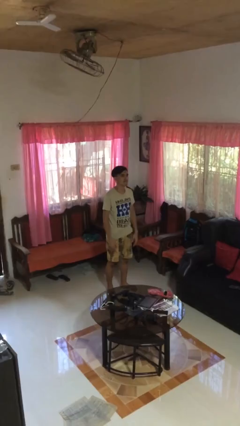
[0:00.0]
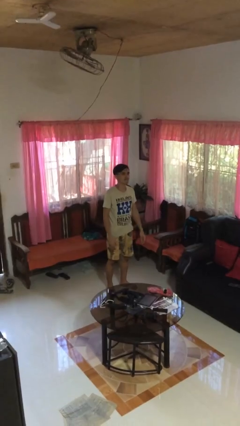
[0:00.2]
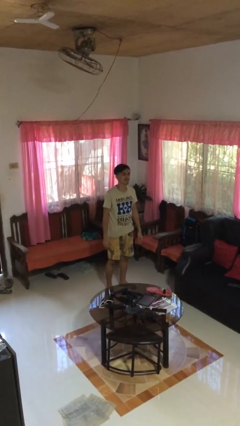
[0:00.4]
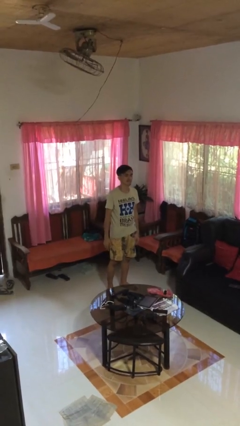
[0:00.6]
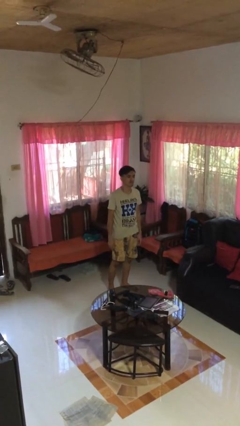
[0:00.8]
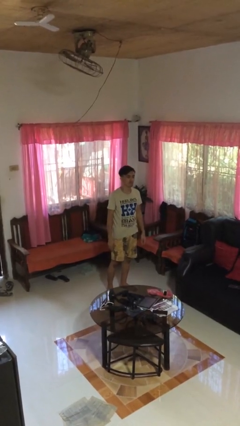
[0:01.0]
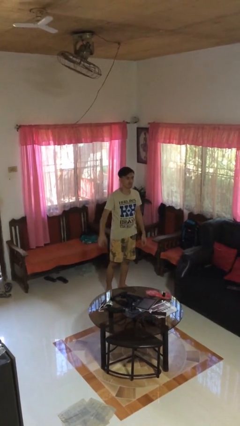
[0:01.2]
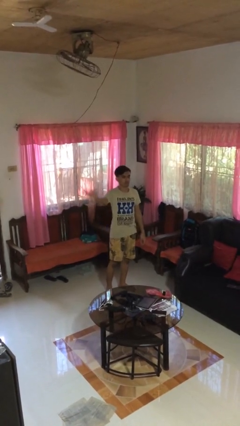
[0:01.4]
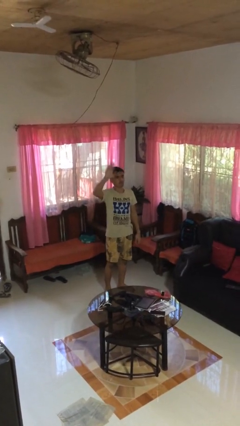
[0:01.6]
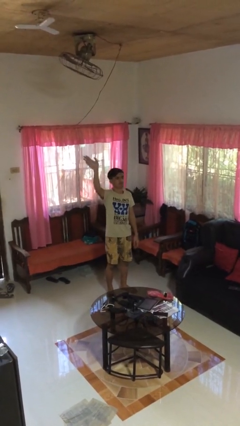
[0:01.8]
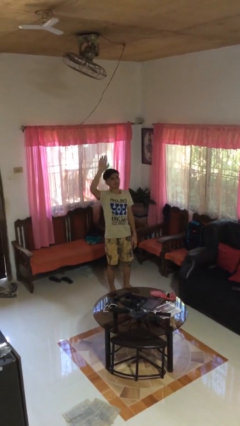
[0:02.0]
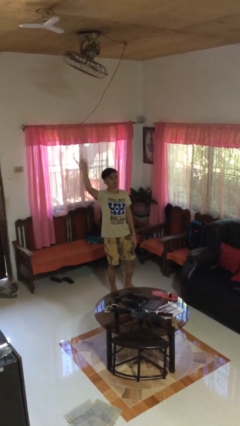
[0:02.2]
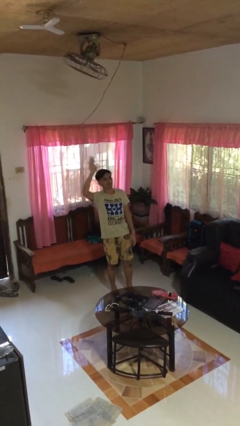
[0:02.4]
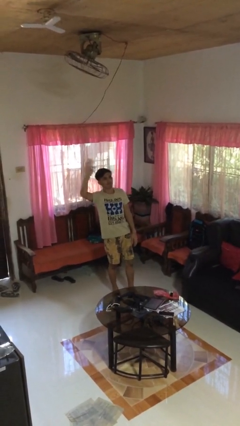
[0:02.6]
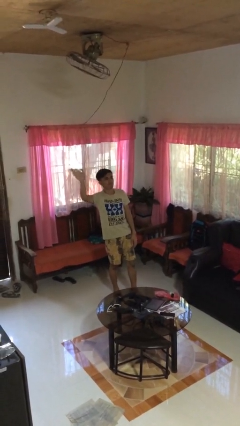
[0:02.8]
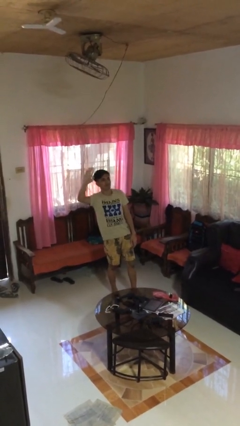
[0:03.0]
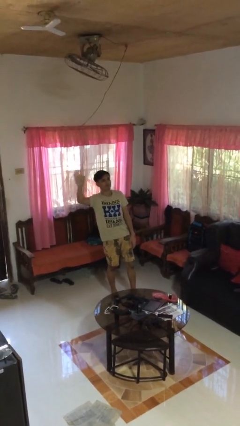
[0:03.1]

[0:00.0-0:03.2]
person waves at person

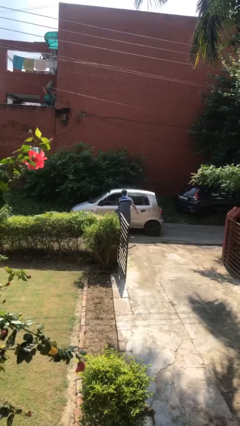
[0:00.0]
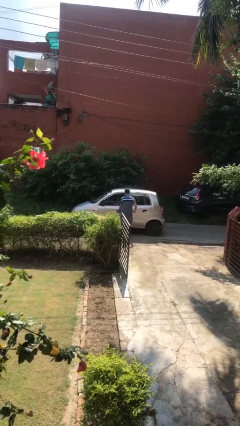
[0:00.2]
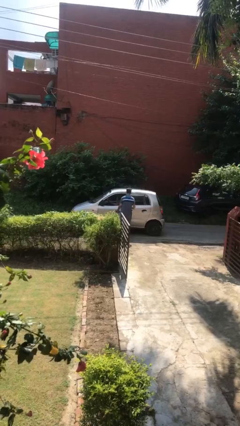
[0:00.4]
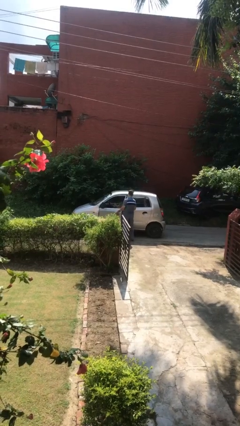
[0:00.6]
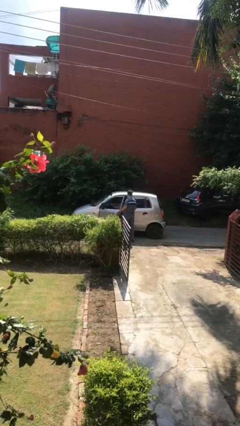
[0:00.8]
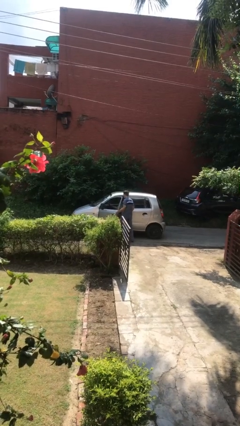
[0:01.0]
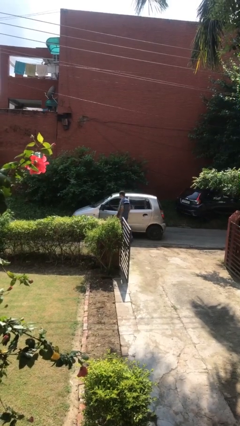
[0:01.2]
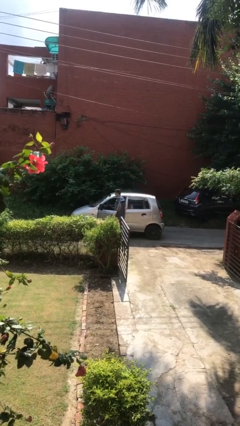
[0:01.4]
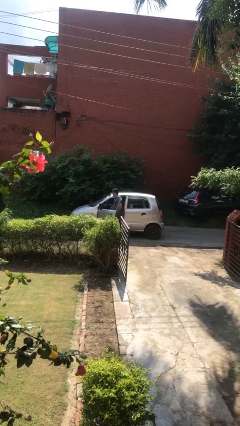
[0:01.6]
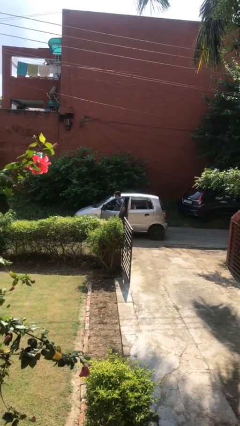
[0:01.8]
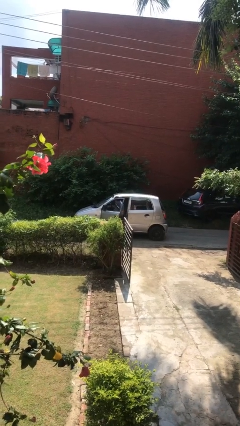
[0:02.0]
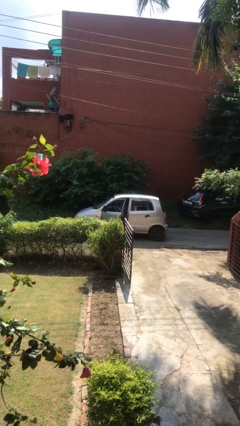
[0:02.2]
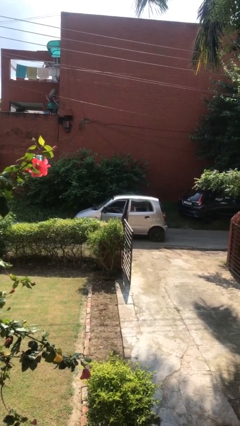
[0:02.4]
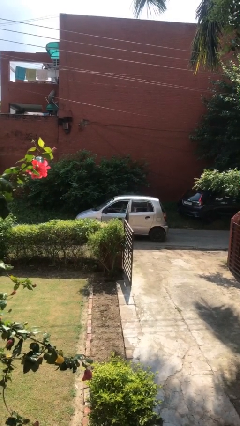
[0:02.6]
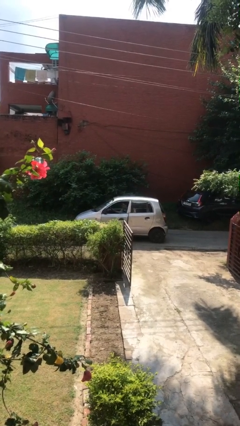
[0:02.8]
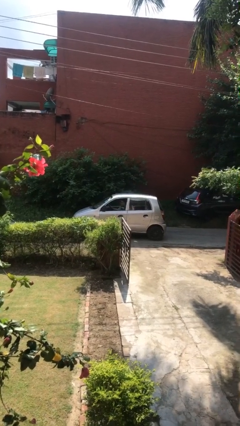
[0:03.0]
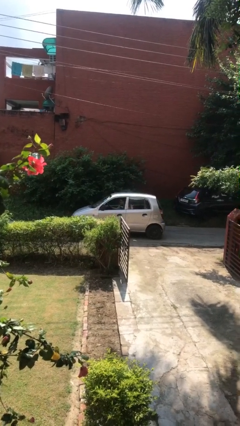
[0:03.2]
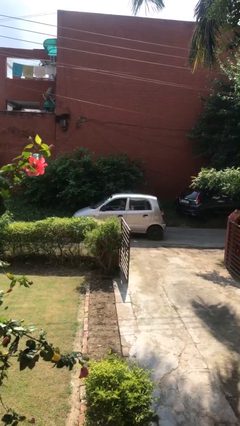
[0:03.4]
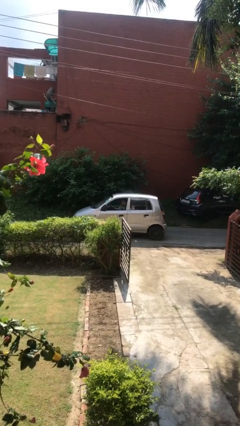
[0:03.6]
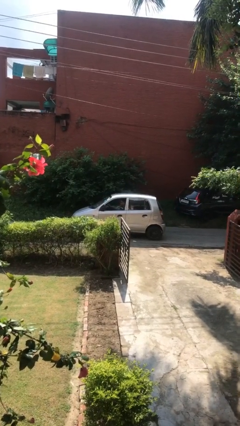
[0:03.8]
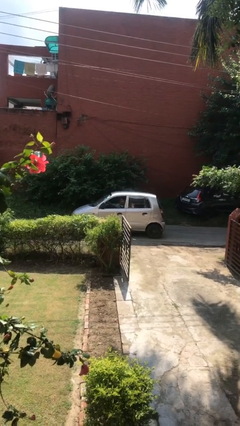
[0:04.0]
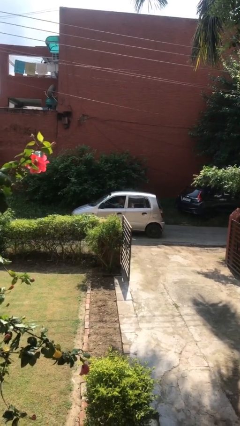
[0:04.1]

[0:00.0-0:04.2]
car picks up person

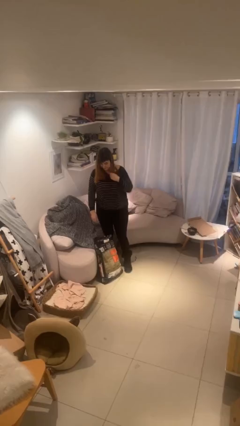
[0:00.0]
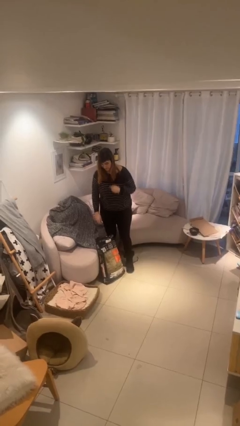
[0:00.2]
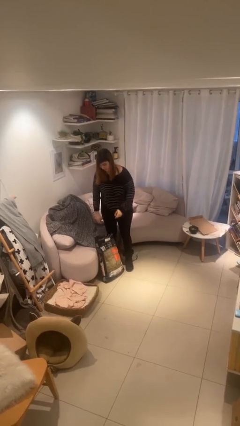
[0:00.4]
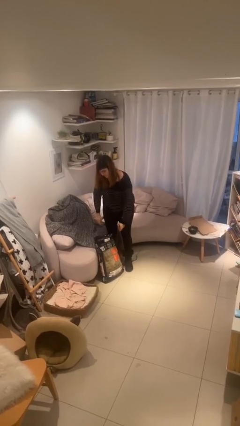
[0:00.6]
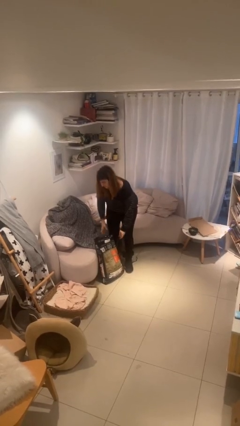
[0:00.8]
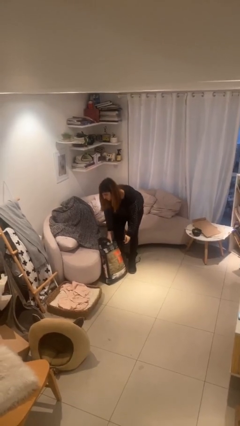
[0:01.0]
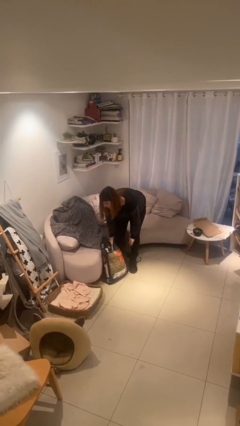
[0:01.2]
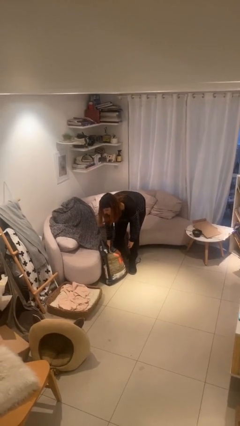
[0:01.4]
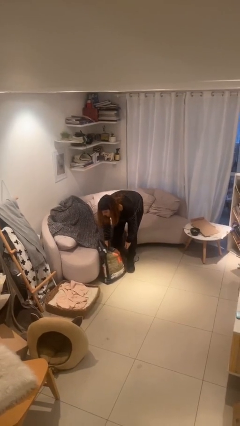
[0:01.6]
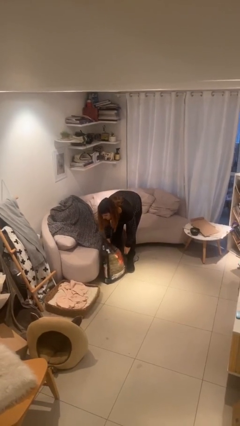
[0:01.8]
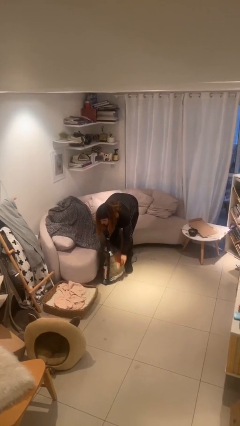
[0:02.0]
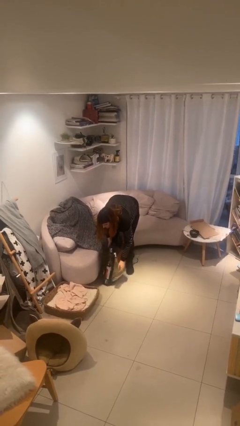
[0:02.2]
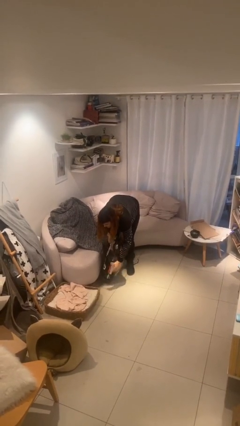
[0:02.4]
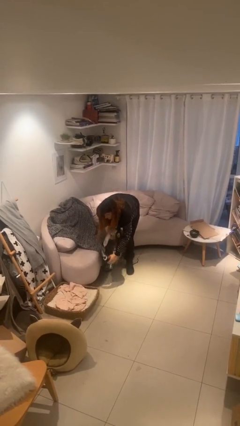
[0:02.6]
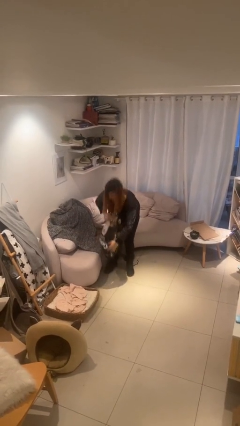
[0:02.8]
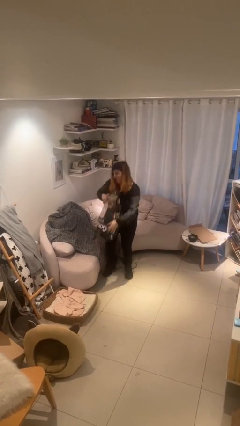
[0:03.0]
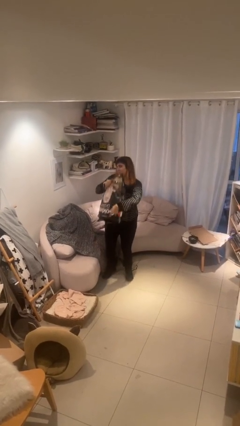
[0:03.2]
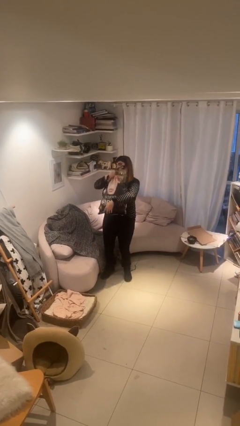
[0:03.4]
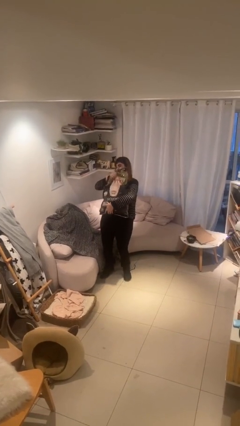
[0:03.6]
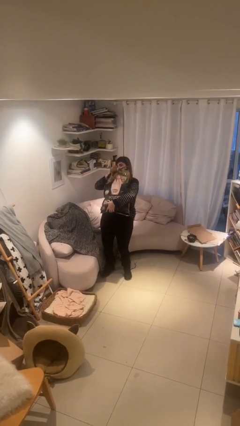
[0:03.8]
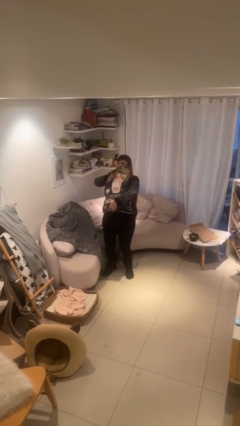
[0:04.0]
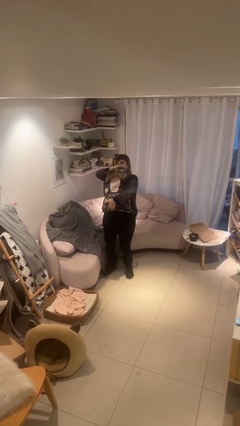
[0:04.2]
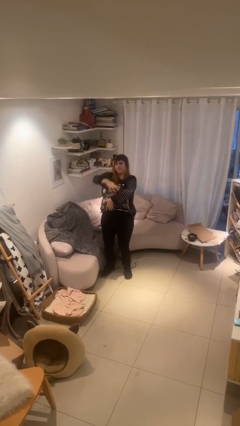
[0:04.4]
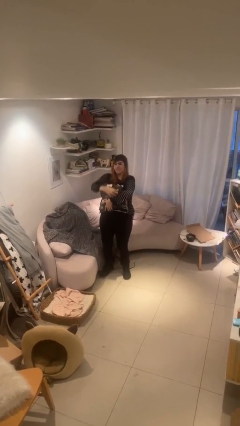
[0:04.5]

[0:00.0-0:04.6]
person picks up object from floor

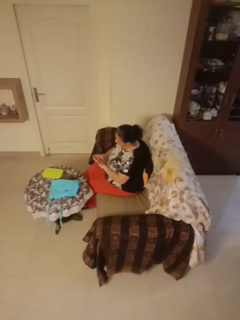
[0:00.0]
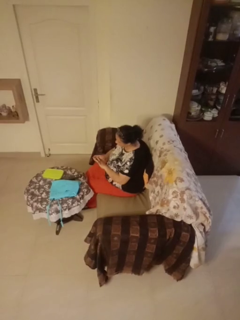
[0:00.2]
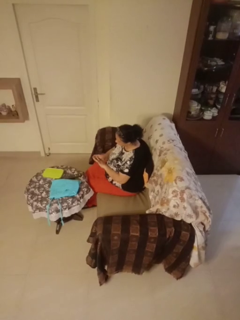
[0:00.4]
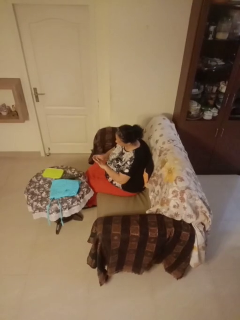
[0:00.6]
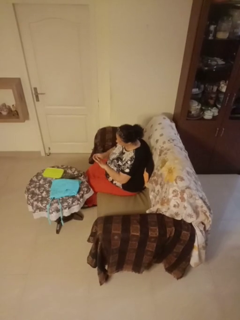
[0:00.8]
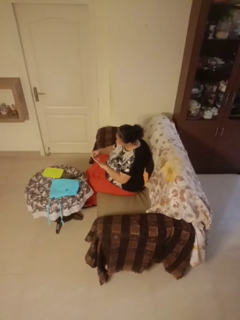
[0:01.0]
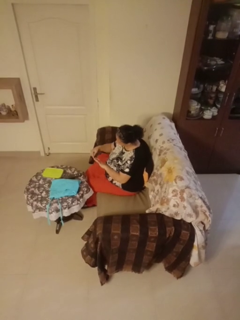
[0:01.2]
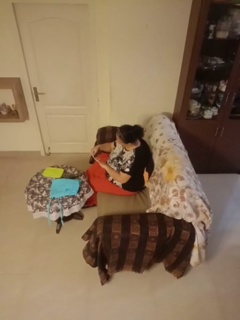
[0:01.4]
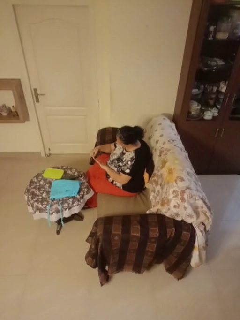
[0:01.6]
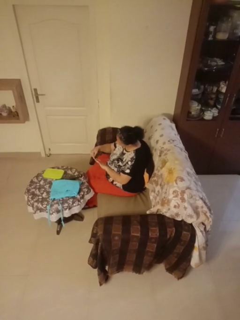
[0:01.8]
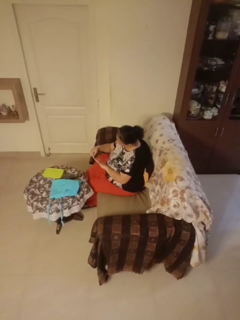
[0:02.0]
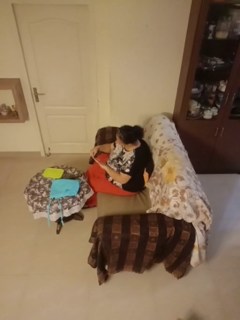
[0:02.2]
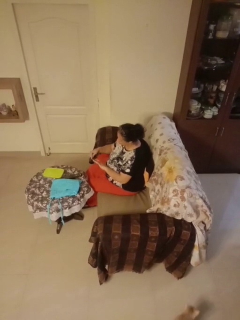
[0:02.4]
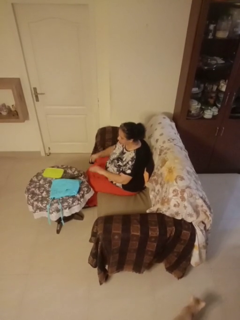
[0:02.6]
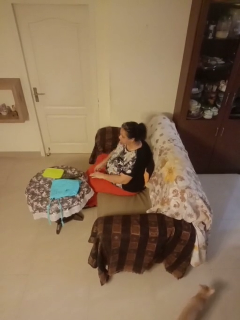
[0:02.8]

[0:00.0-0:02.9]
person files fingernails

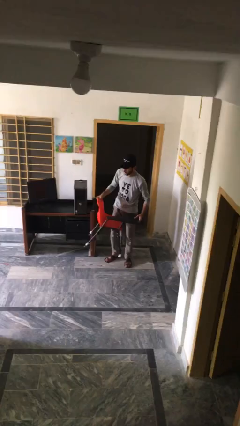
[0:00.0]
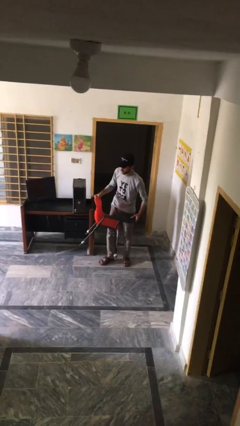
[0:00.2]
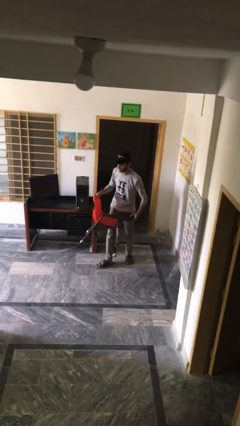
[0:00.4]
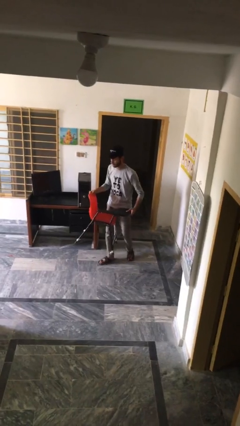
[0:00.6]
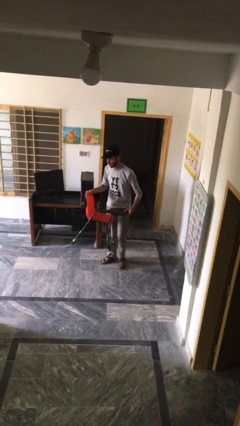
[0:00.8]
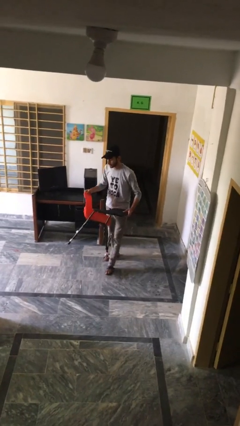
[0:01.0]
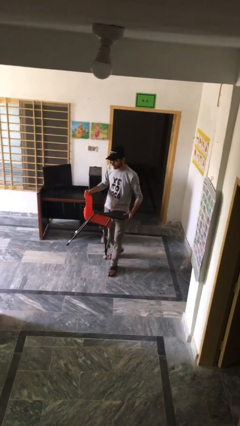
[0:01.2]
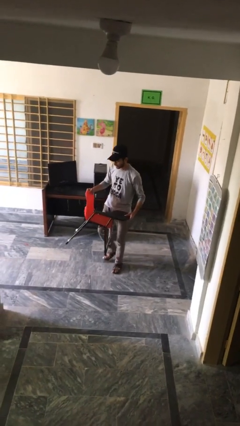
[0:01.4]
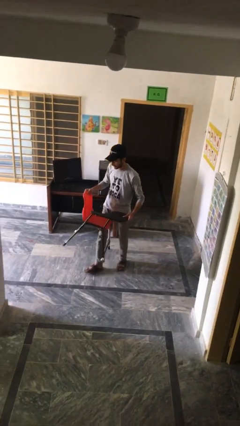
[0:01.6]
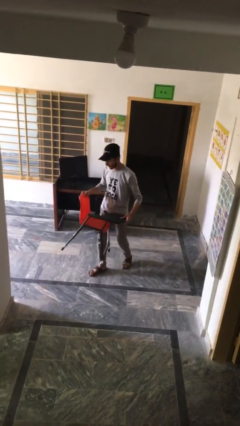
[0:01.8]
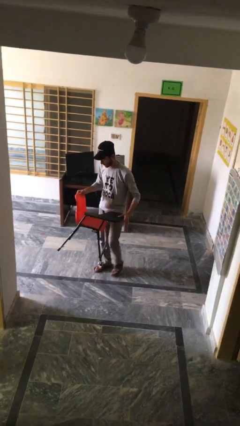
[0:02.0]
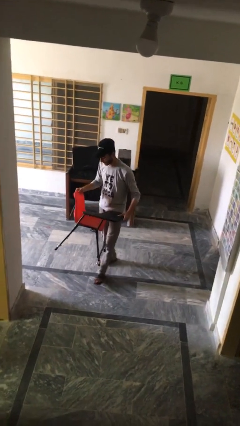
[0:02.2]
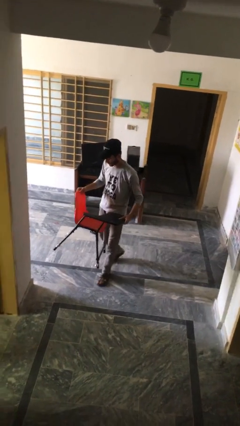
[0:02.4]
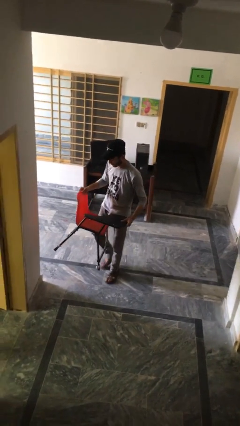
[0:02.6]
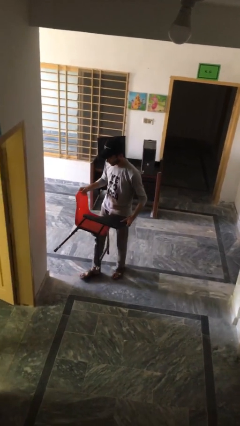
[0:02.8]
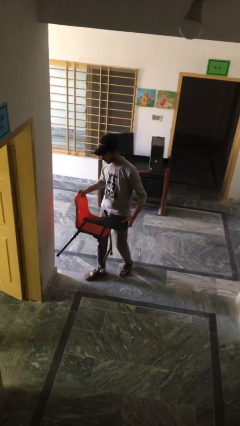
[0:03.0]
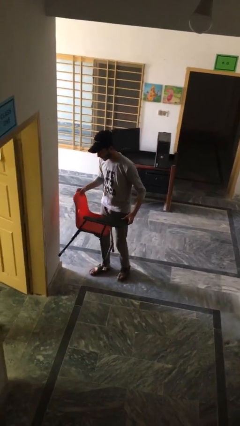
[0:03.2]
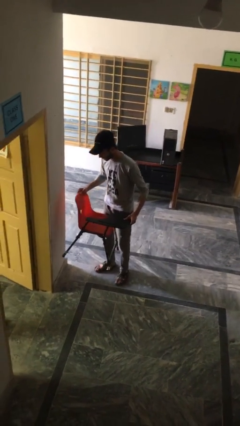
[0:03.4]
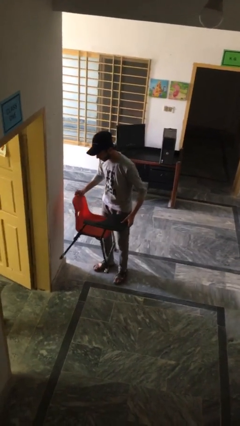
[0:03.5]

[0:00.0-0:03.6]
person carries heavy object
